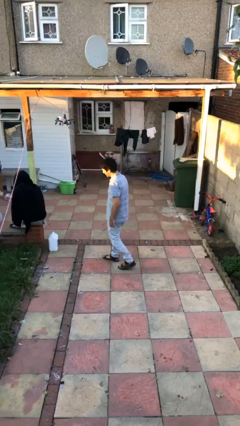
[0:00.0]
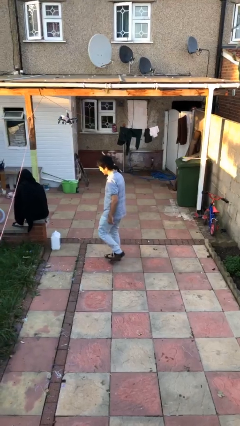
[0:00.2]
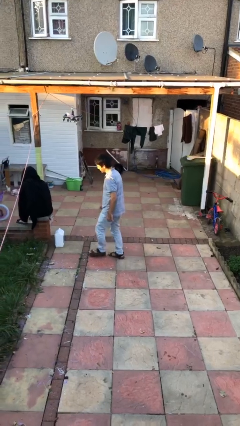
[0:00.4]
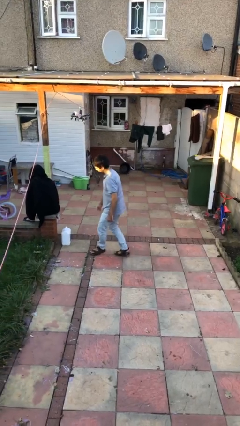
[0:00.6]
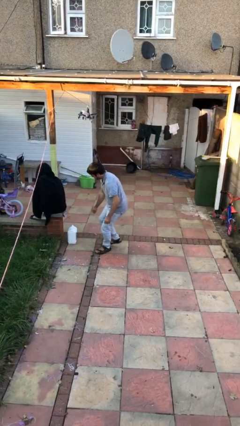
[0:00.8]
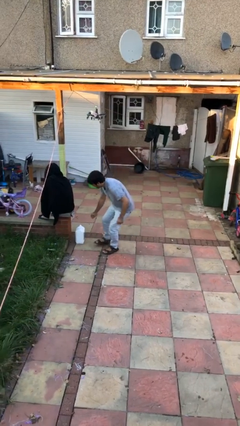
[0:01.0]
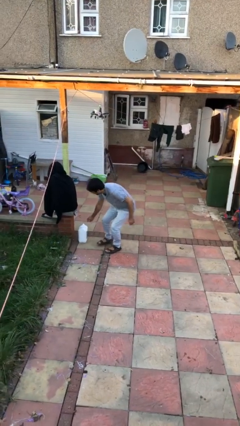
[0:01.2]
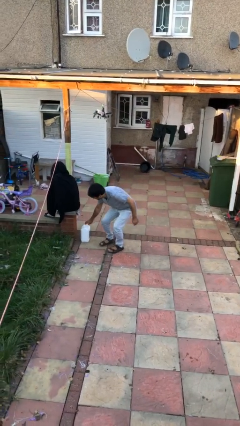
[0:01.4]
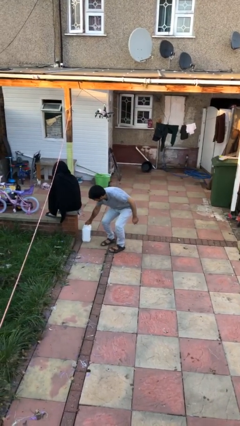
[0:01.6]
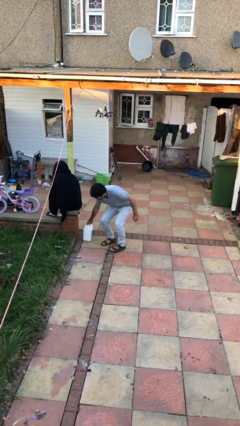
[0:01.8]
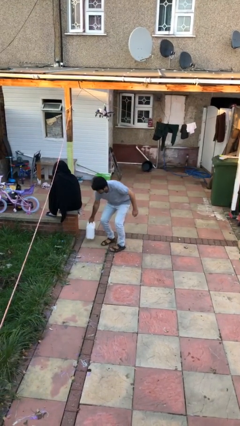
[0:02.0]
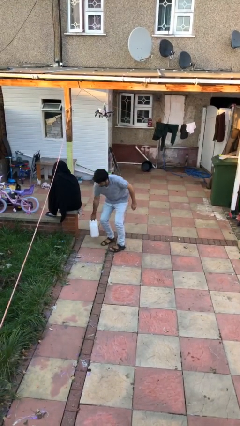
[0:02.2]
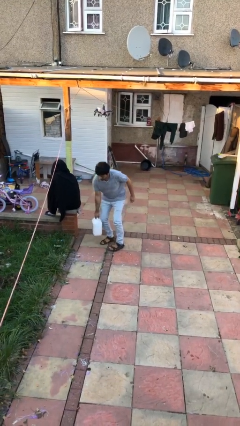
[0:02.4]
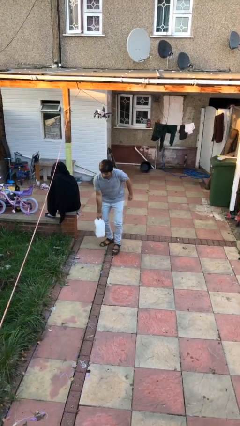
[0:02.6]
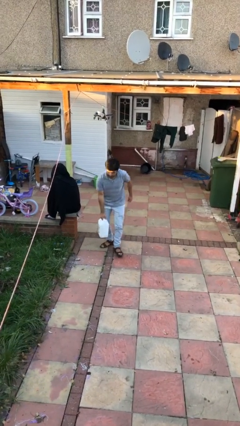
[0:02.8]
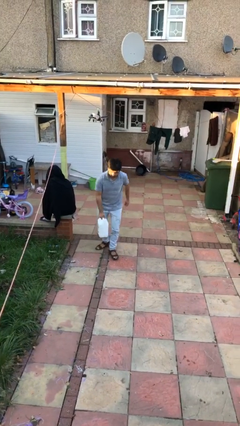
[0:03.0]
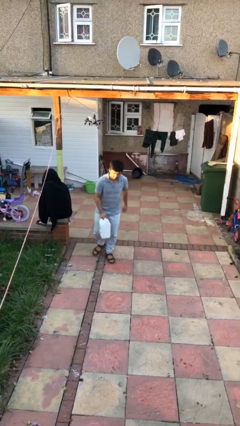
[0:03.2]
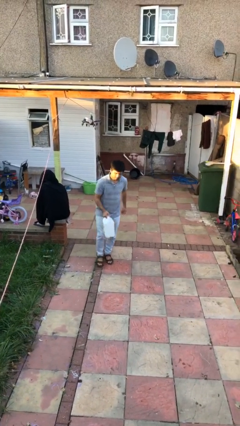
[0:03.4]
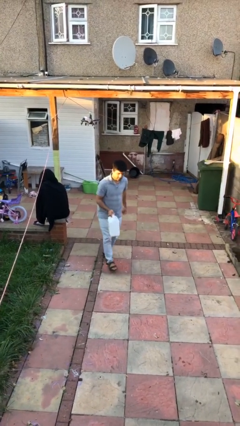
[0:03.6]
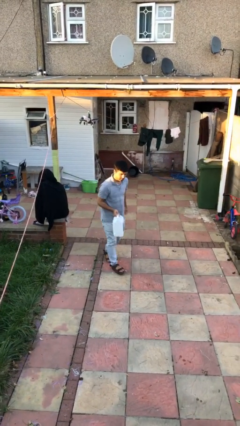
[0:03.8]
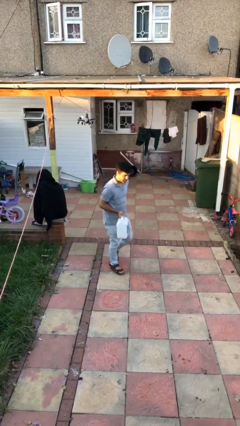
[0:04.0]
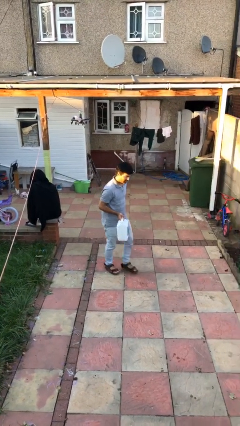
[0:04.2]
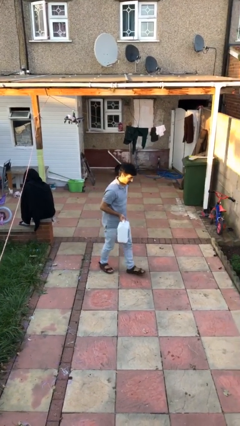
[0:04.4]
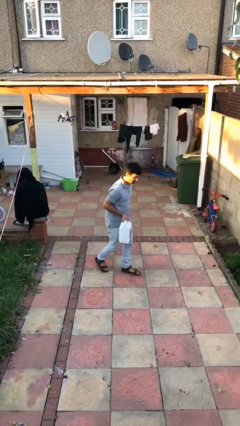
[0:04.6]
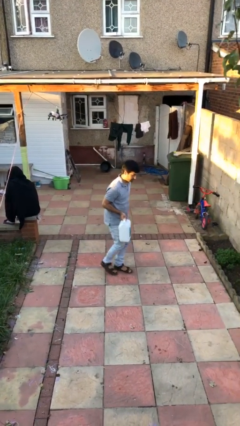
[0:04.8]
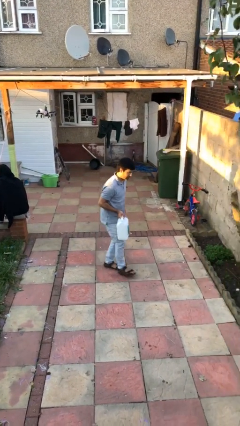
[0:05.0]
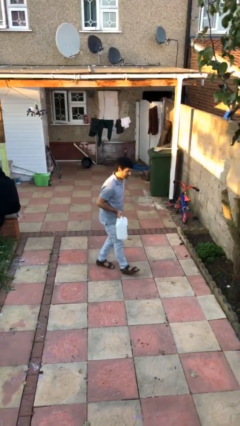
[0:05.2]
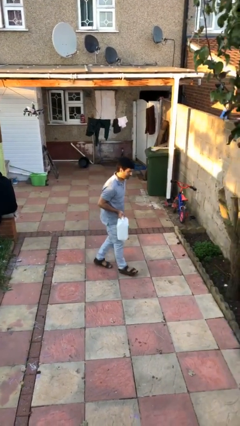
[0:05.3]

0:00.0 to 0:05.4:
person steals object from person

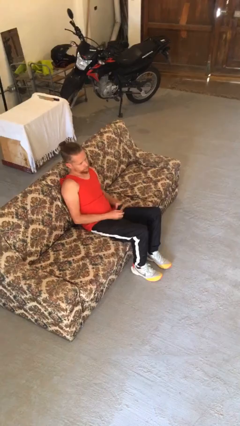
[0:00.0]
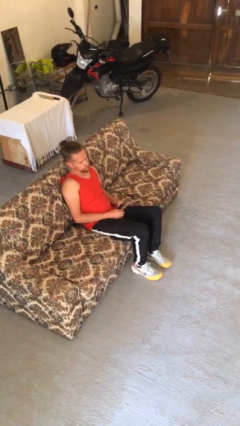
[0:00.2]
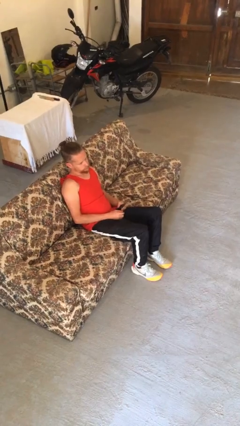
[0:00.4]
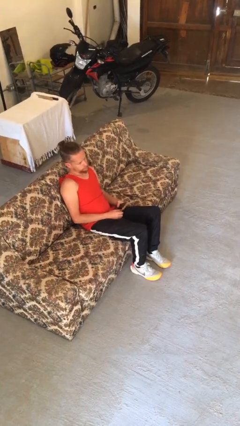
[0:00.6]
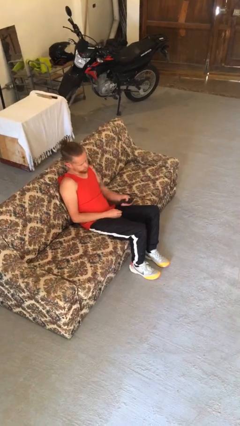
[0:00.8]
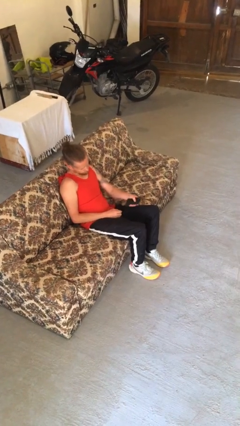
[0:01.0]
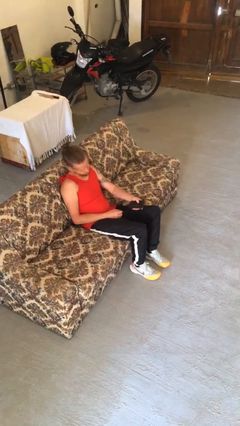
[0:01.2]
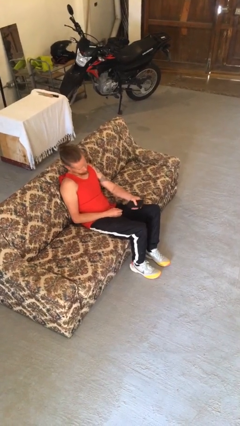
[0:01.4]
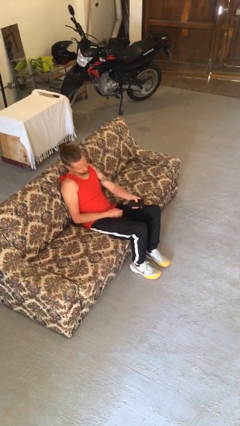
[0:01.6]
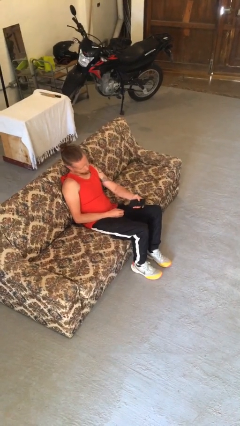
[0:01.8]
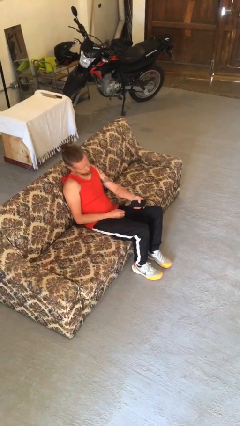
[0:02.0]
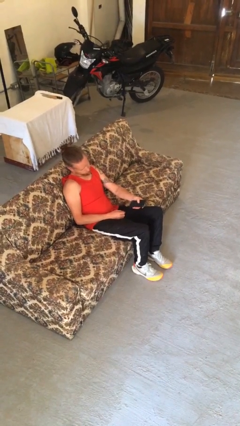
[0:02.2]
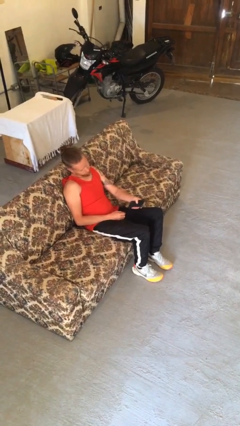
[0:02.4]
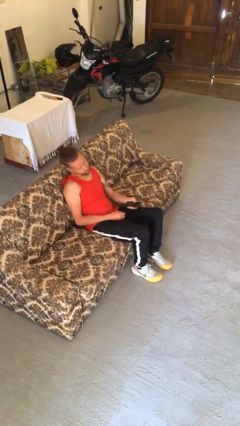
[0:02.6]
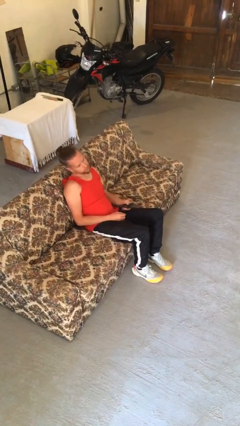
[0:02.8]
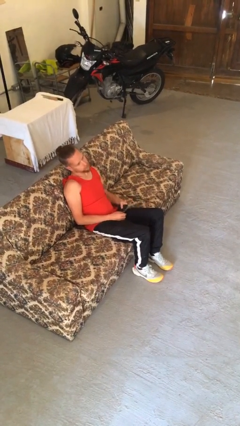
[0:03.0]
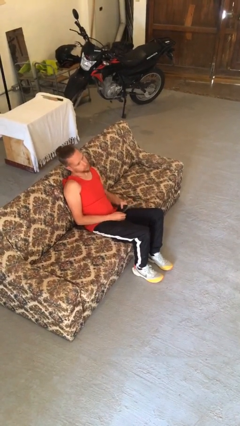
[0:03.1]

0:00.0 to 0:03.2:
person uses television remote

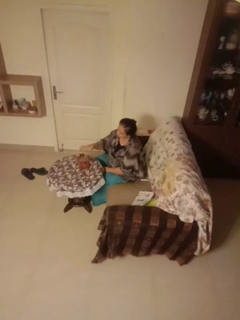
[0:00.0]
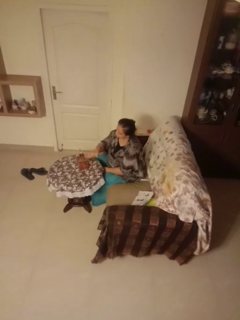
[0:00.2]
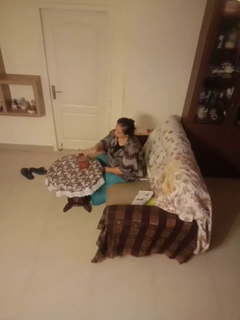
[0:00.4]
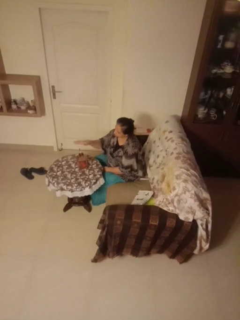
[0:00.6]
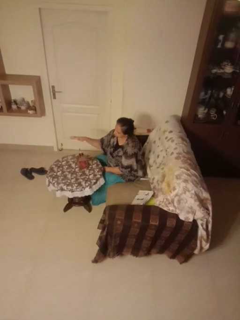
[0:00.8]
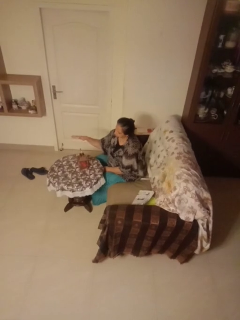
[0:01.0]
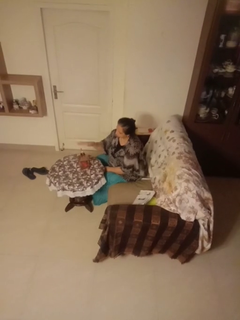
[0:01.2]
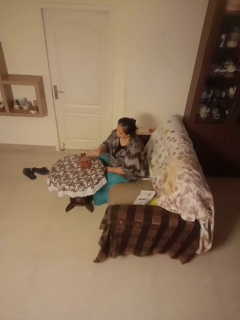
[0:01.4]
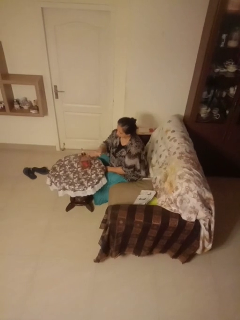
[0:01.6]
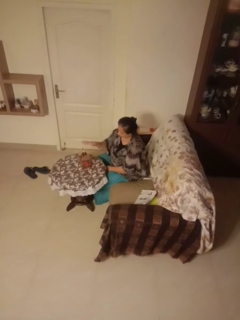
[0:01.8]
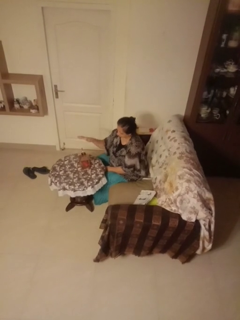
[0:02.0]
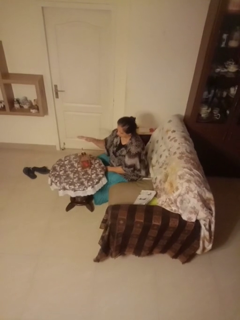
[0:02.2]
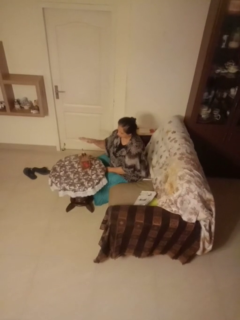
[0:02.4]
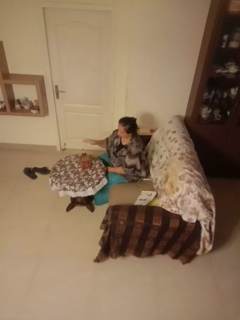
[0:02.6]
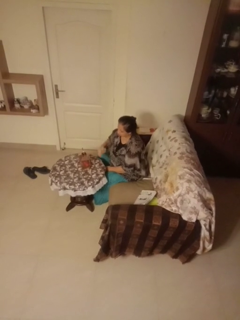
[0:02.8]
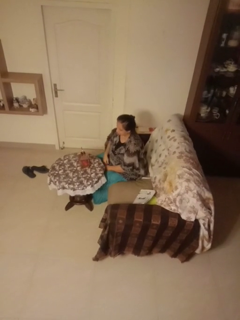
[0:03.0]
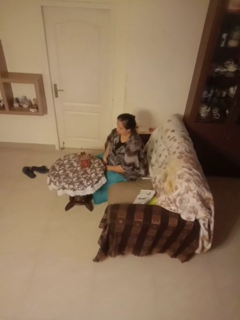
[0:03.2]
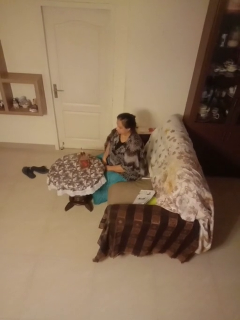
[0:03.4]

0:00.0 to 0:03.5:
person waves hand over object

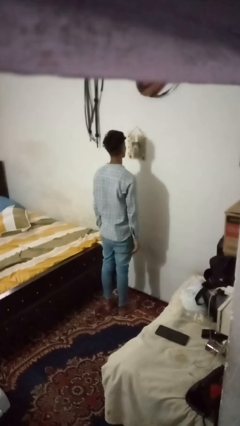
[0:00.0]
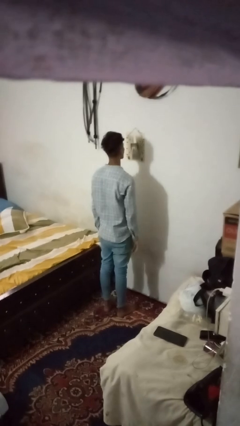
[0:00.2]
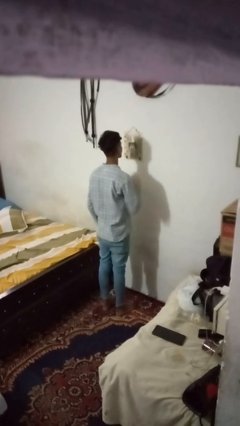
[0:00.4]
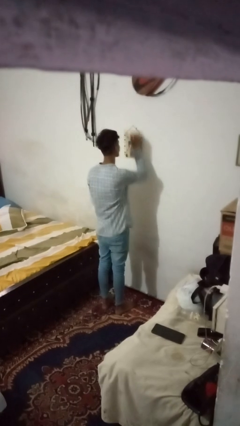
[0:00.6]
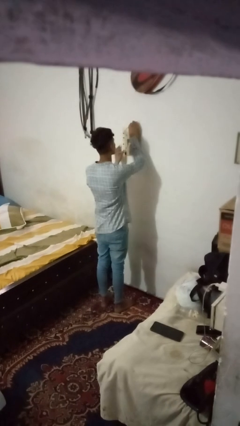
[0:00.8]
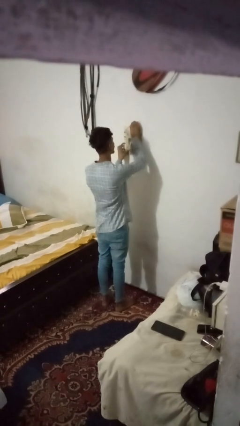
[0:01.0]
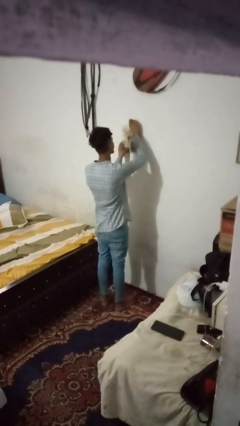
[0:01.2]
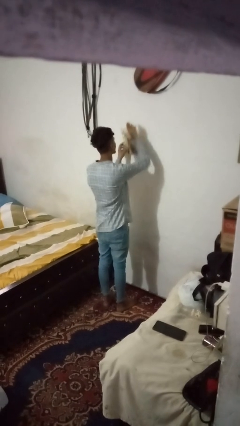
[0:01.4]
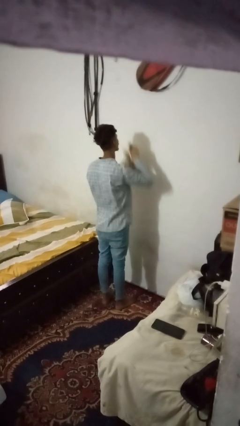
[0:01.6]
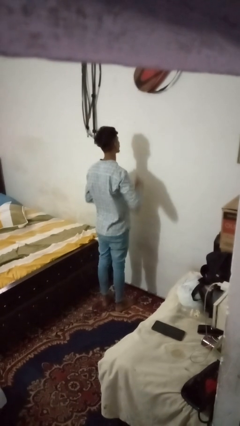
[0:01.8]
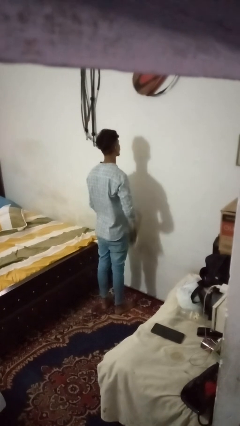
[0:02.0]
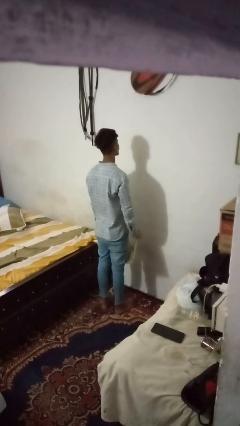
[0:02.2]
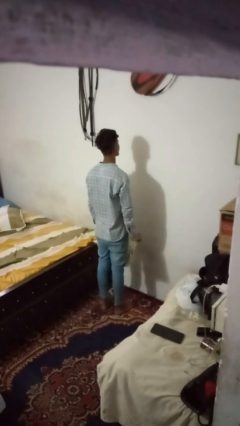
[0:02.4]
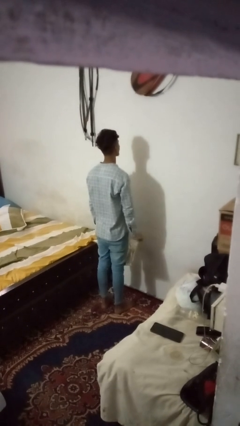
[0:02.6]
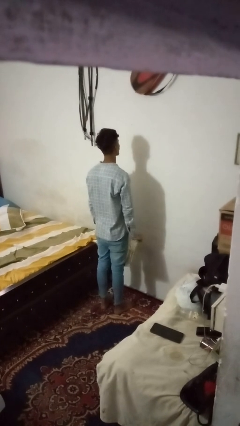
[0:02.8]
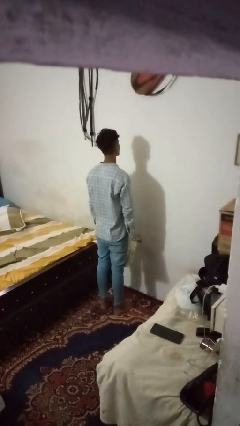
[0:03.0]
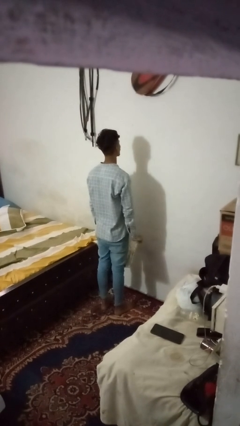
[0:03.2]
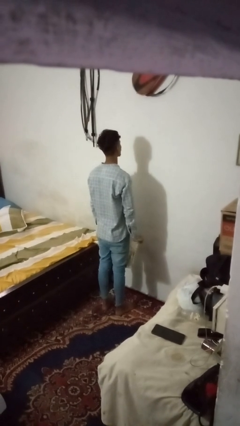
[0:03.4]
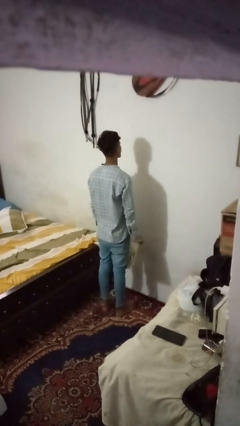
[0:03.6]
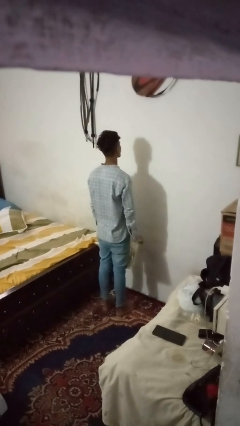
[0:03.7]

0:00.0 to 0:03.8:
person takes down picture frame

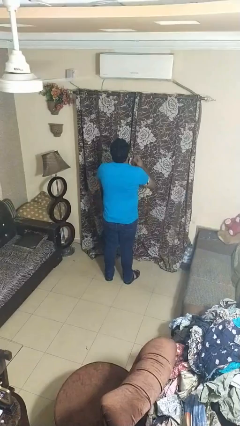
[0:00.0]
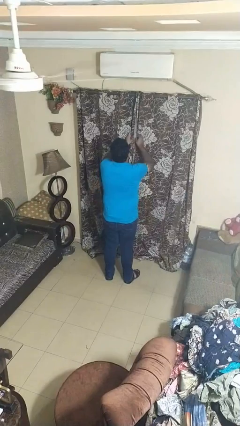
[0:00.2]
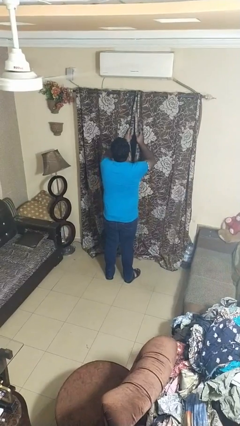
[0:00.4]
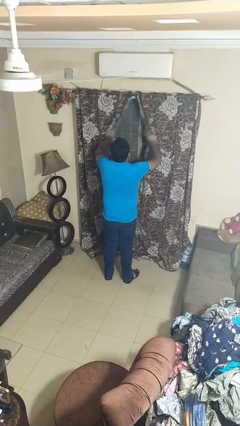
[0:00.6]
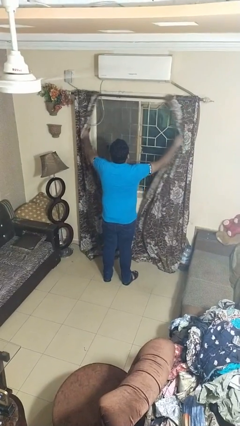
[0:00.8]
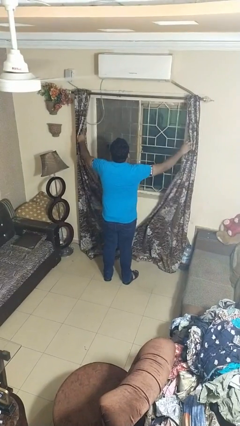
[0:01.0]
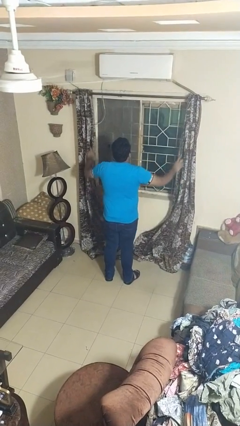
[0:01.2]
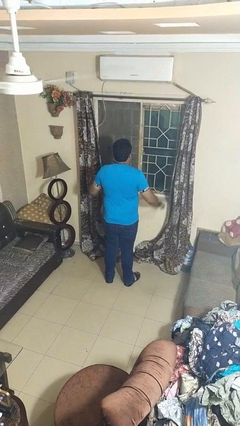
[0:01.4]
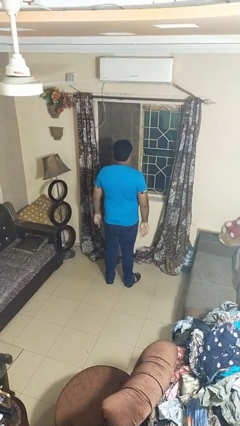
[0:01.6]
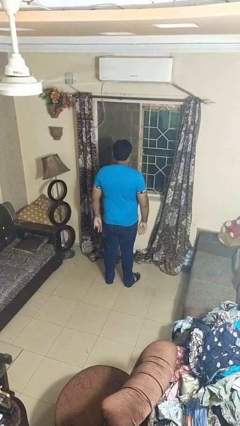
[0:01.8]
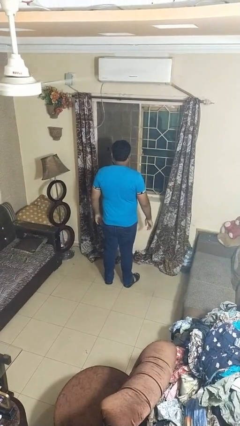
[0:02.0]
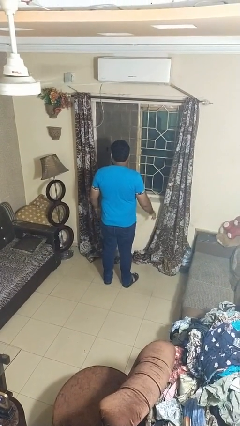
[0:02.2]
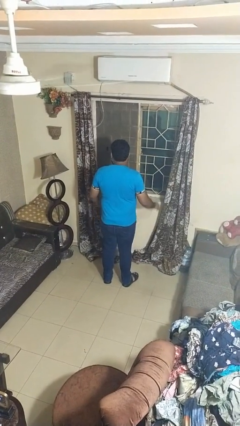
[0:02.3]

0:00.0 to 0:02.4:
person opens curtains
